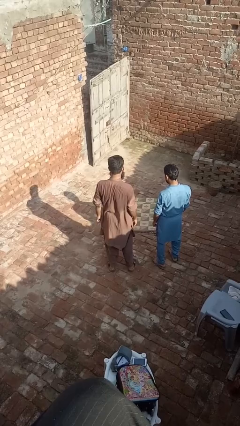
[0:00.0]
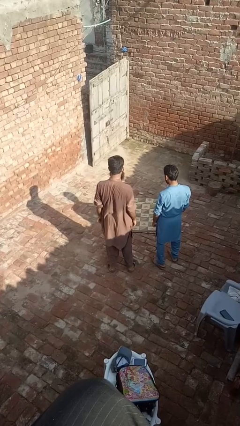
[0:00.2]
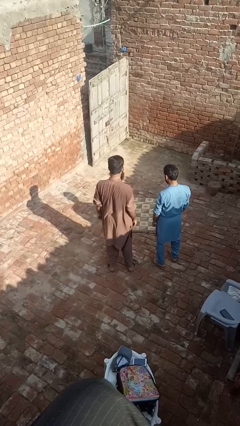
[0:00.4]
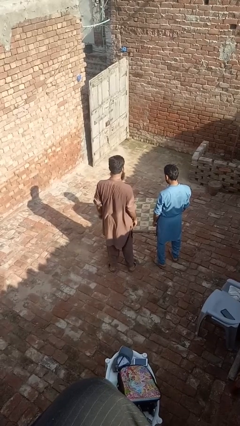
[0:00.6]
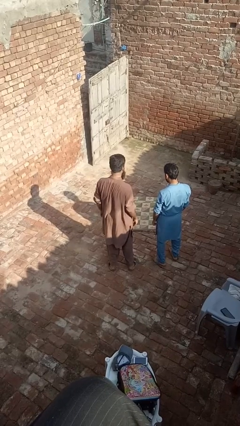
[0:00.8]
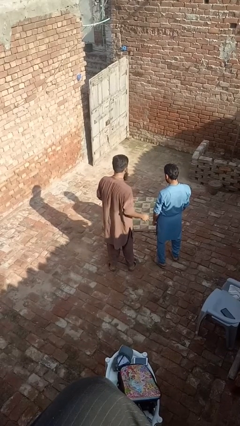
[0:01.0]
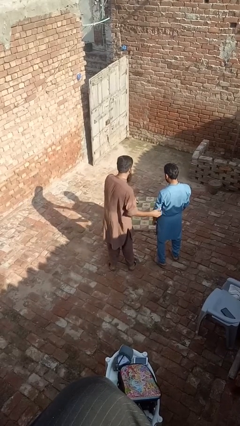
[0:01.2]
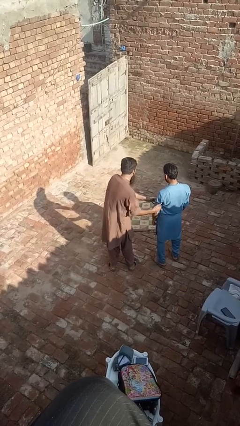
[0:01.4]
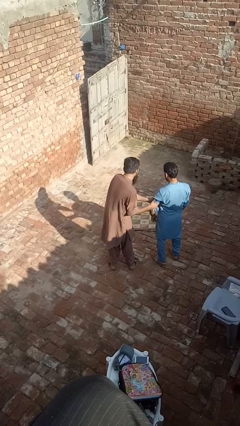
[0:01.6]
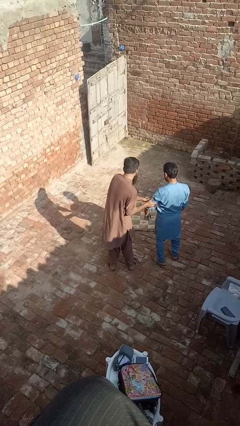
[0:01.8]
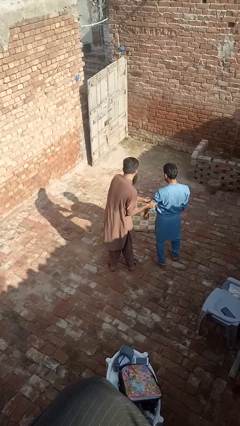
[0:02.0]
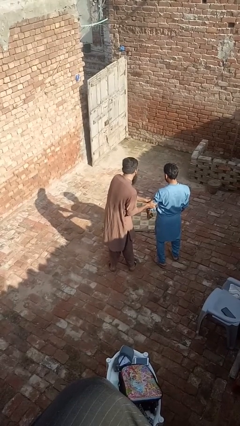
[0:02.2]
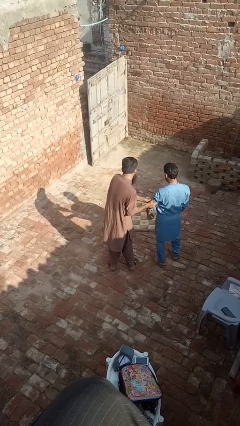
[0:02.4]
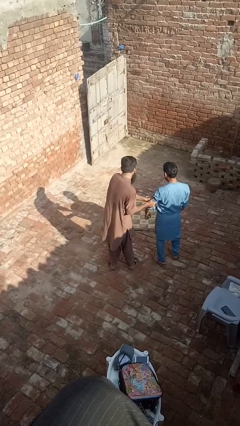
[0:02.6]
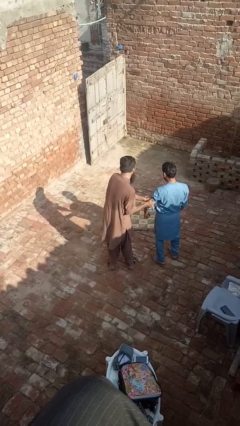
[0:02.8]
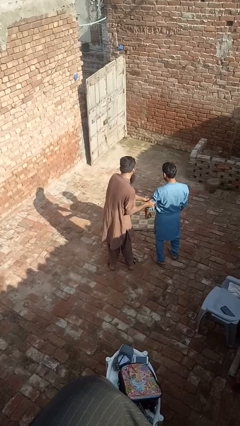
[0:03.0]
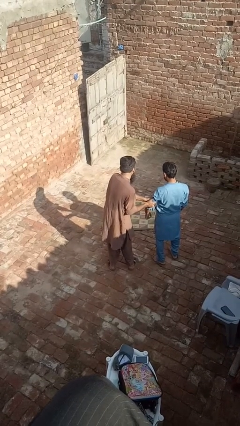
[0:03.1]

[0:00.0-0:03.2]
person grabs person by bicep

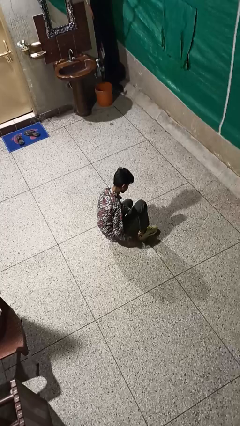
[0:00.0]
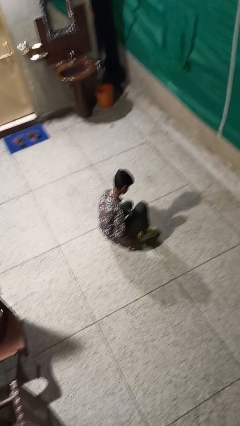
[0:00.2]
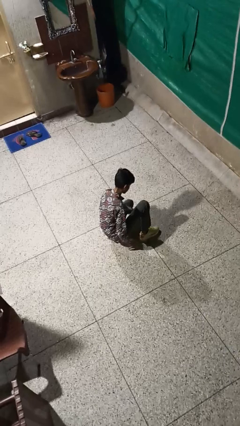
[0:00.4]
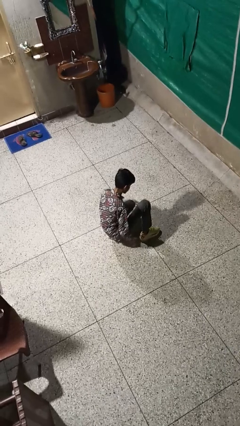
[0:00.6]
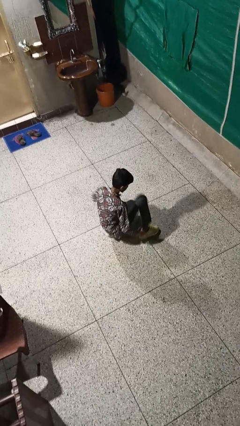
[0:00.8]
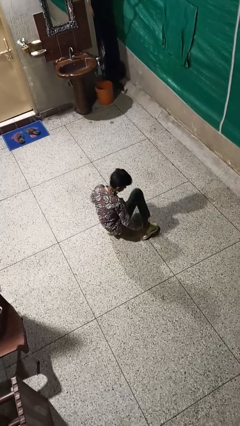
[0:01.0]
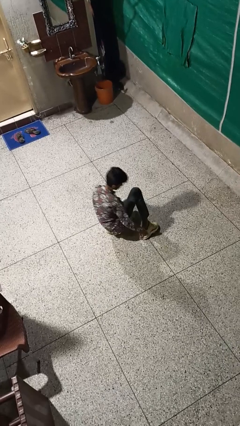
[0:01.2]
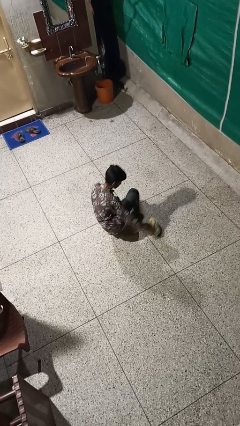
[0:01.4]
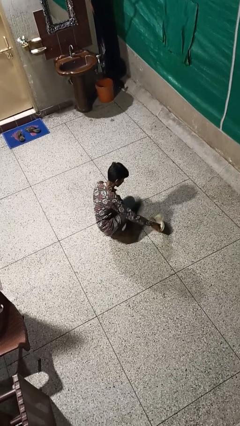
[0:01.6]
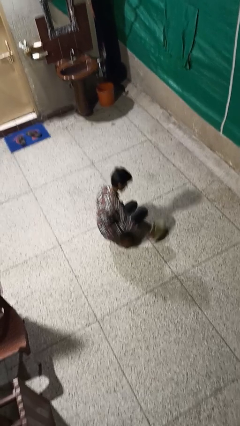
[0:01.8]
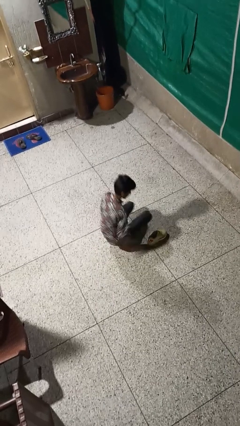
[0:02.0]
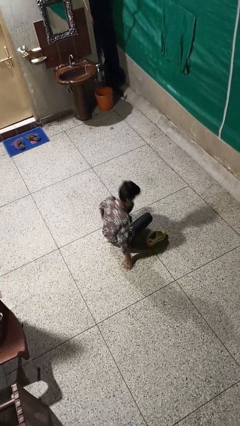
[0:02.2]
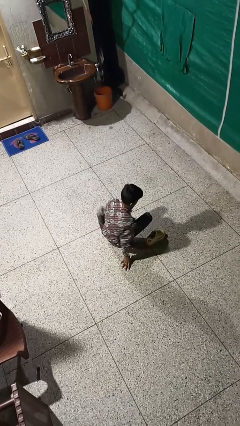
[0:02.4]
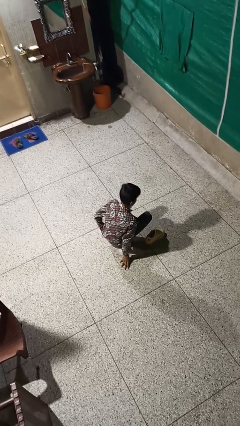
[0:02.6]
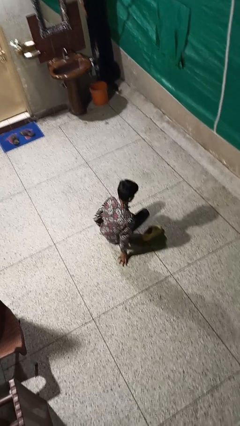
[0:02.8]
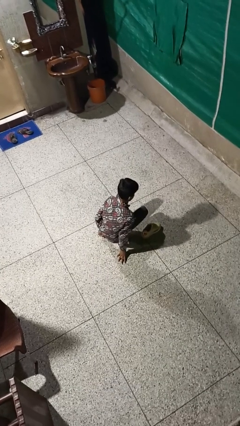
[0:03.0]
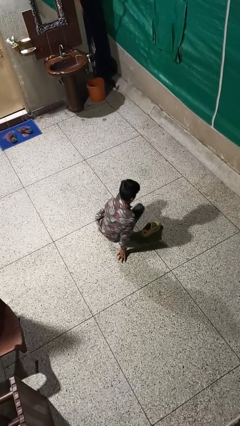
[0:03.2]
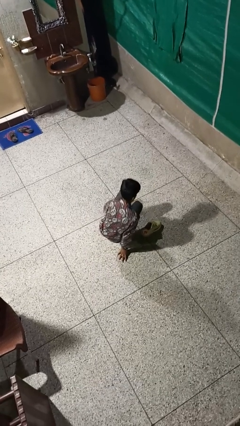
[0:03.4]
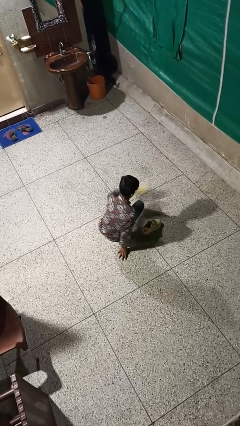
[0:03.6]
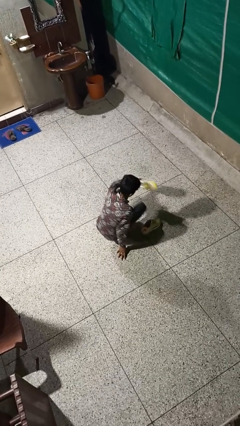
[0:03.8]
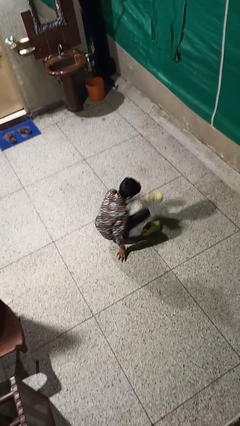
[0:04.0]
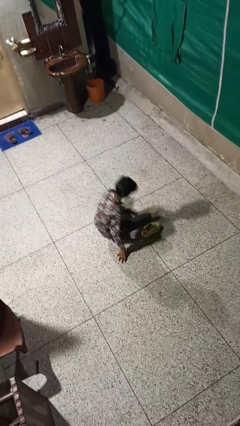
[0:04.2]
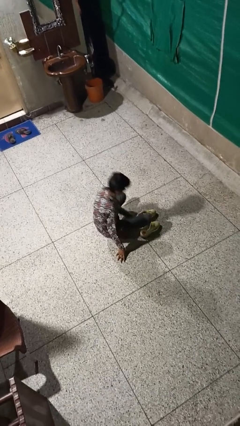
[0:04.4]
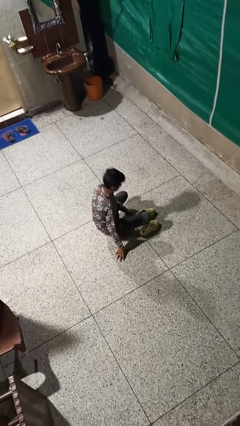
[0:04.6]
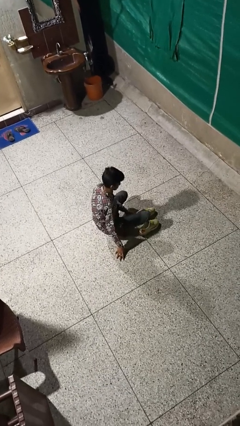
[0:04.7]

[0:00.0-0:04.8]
person takes off shoes

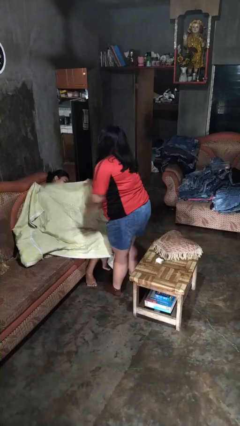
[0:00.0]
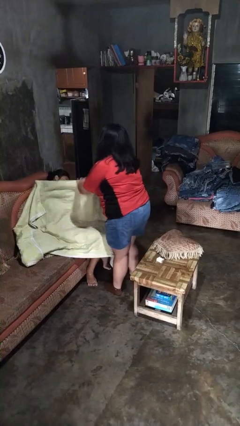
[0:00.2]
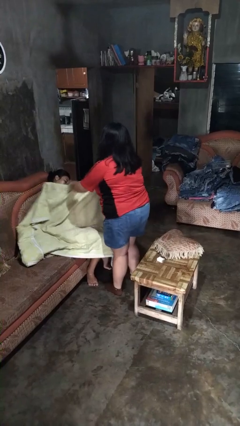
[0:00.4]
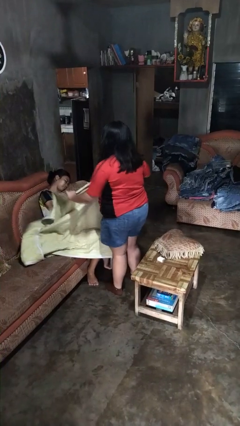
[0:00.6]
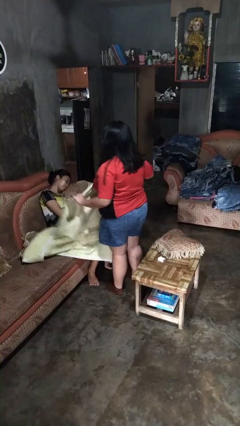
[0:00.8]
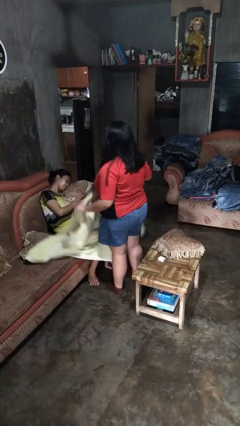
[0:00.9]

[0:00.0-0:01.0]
person uncovers friend with blanket

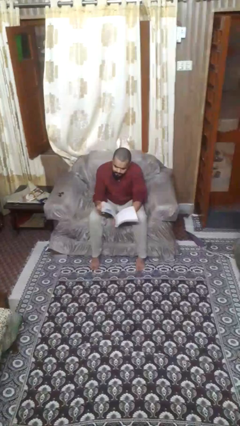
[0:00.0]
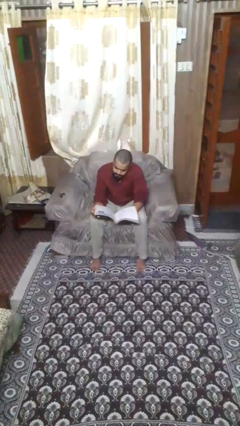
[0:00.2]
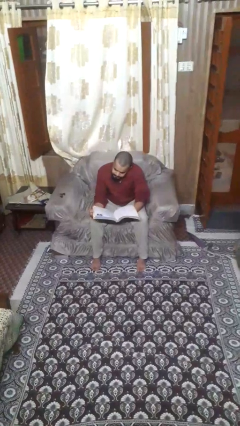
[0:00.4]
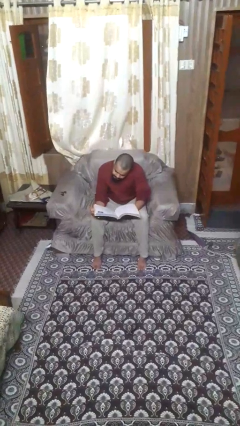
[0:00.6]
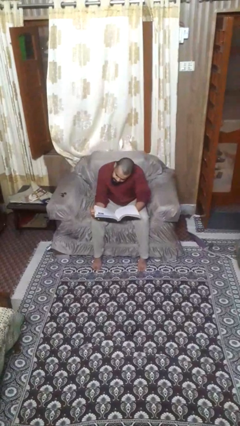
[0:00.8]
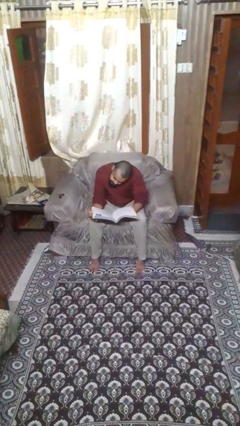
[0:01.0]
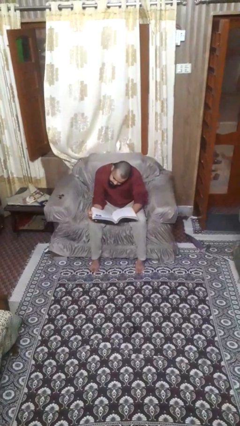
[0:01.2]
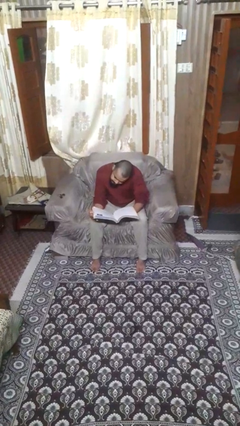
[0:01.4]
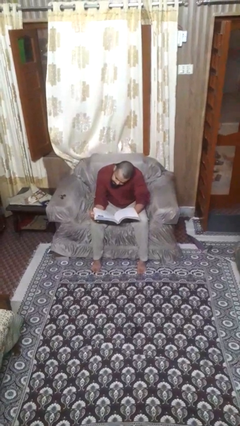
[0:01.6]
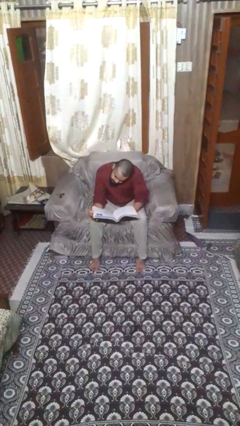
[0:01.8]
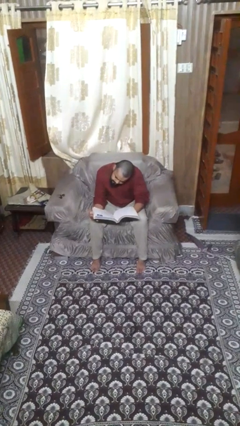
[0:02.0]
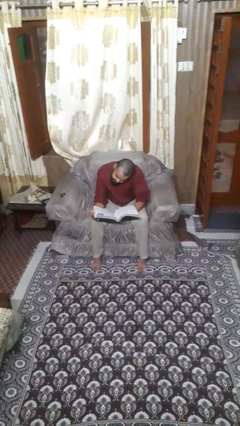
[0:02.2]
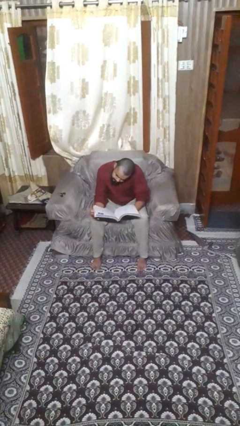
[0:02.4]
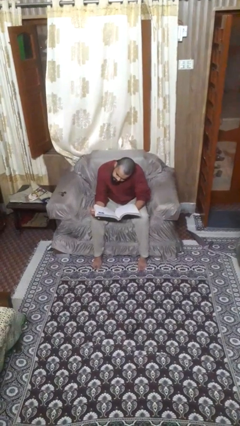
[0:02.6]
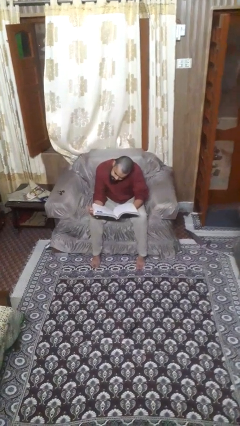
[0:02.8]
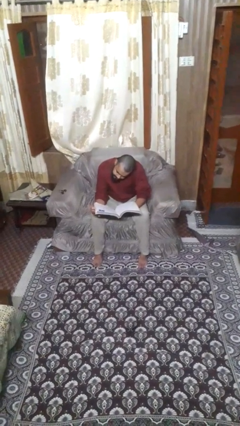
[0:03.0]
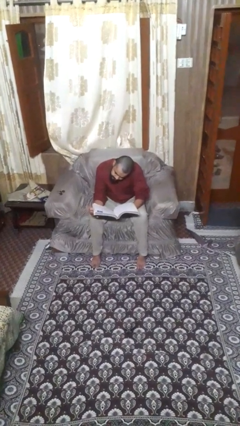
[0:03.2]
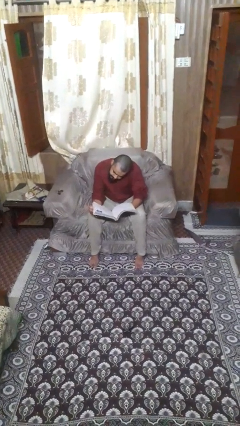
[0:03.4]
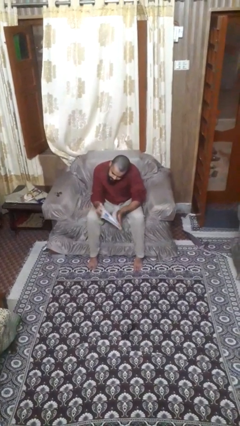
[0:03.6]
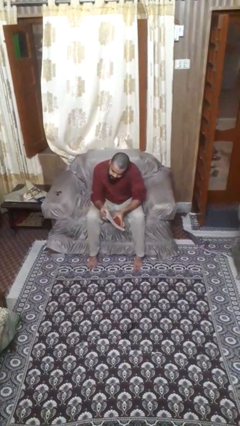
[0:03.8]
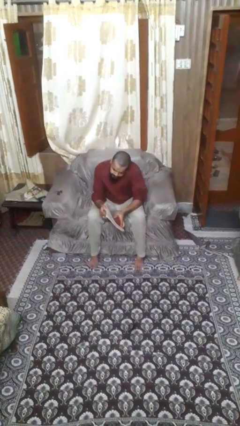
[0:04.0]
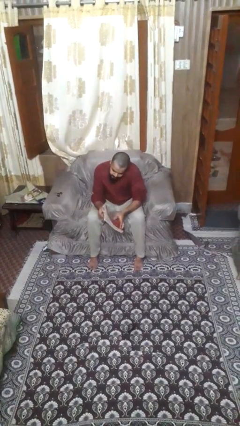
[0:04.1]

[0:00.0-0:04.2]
person reads book

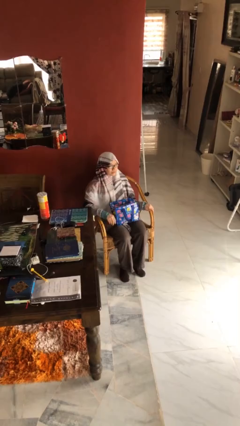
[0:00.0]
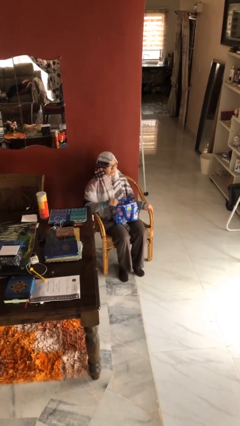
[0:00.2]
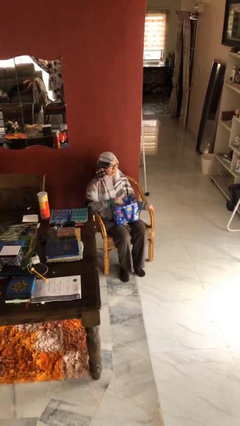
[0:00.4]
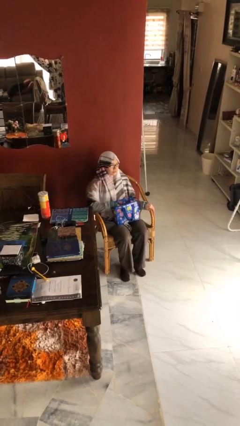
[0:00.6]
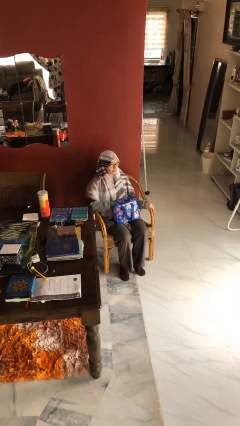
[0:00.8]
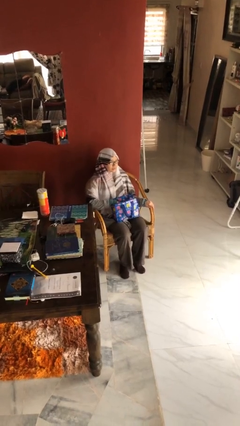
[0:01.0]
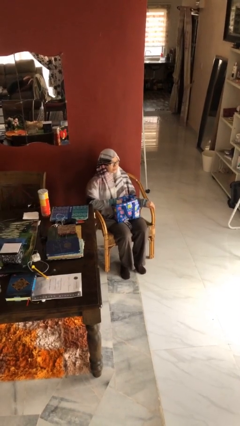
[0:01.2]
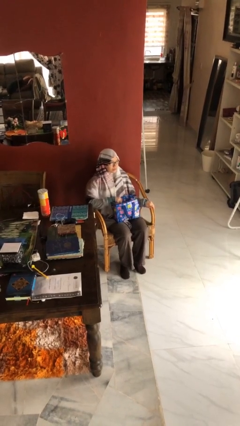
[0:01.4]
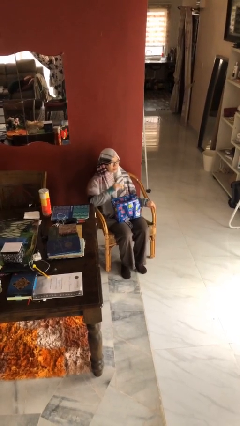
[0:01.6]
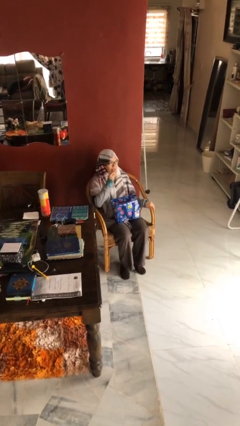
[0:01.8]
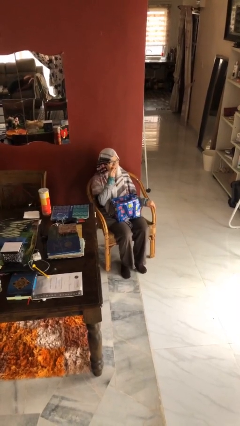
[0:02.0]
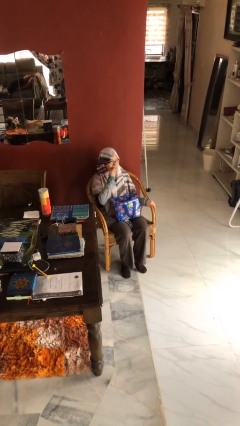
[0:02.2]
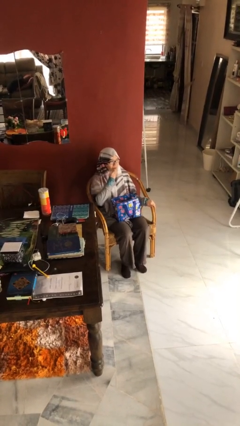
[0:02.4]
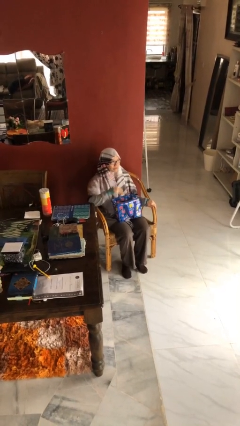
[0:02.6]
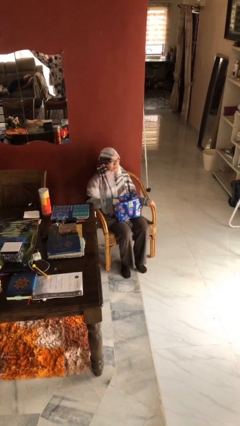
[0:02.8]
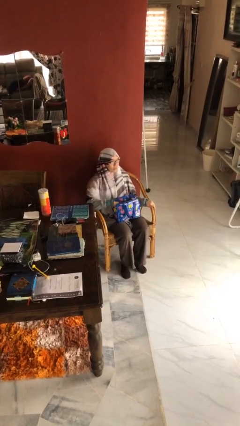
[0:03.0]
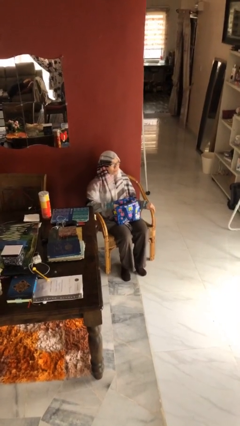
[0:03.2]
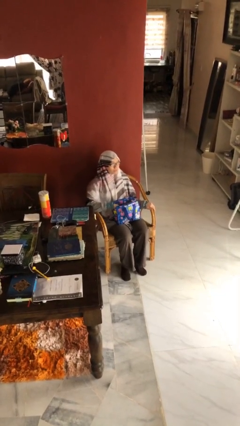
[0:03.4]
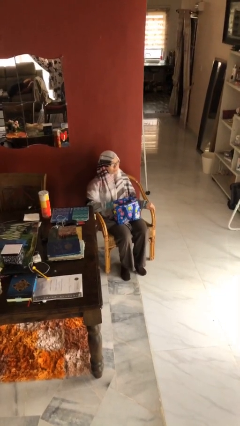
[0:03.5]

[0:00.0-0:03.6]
person eats snack from bag

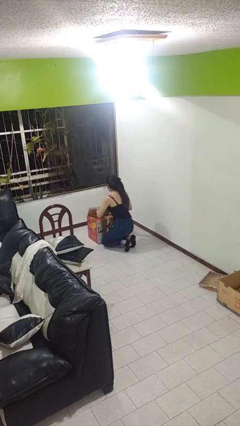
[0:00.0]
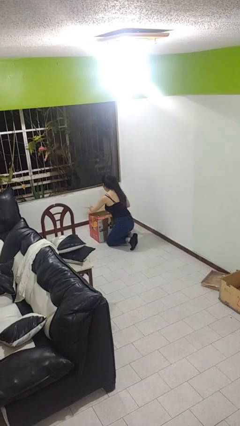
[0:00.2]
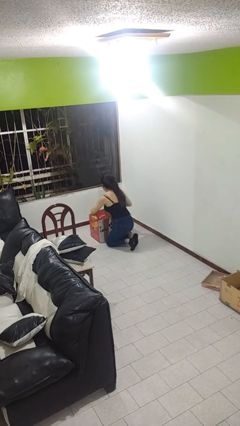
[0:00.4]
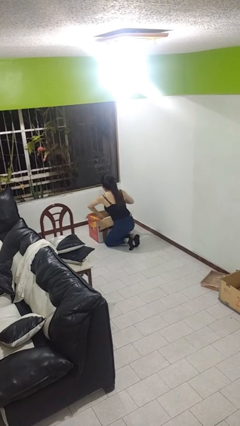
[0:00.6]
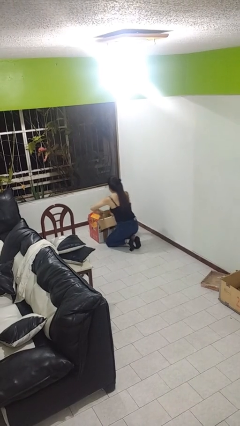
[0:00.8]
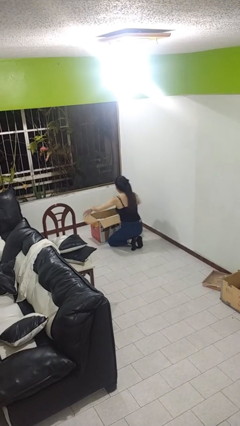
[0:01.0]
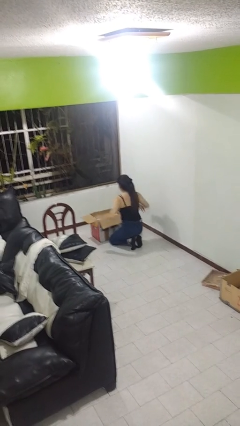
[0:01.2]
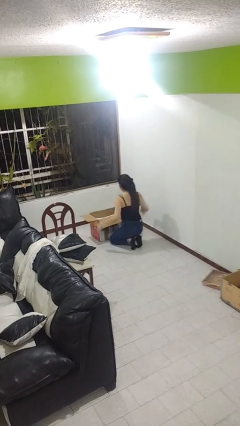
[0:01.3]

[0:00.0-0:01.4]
person opens box
